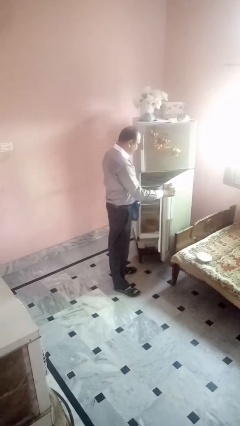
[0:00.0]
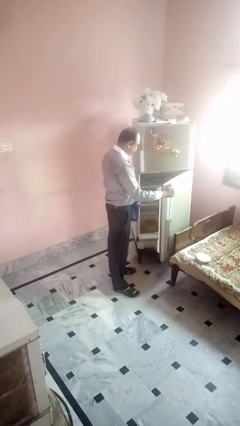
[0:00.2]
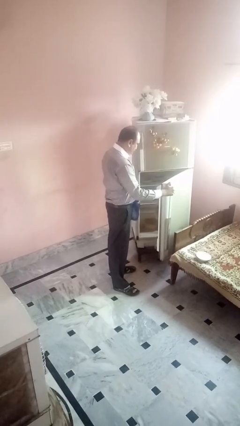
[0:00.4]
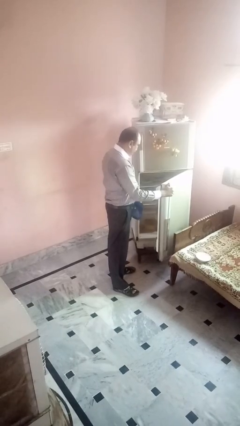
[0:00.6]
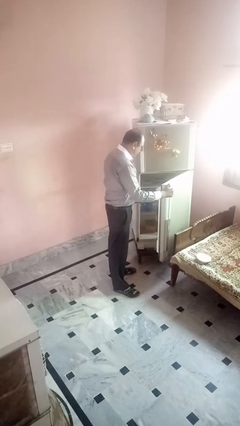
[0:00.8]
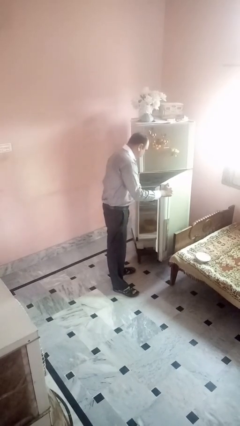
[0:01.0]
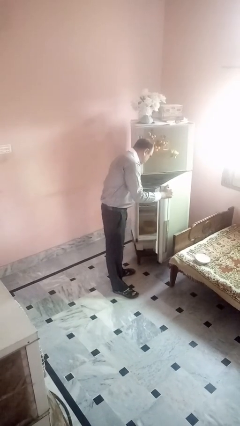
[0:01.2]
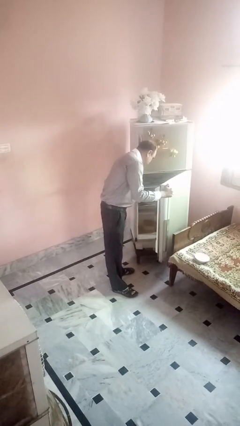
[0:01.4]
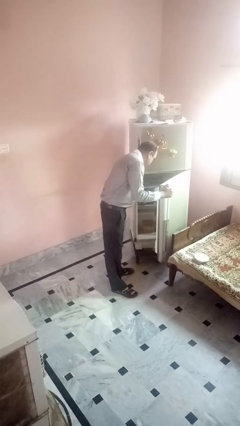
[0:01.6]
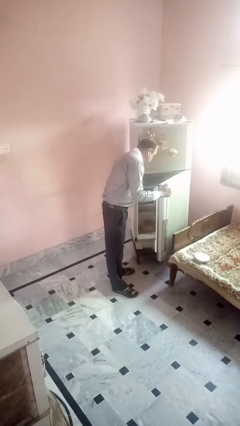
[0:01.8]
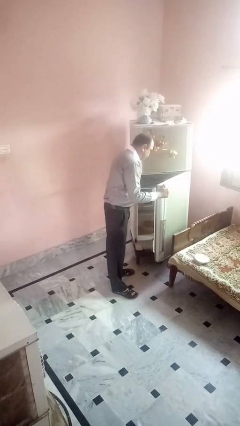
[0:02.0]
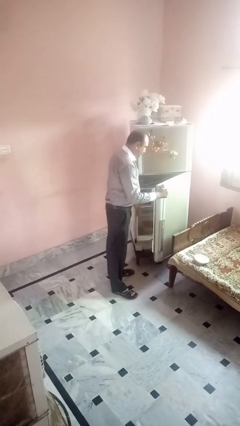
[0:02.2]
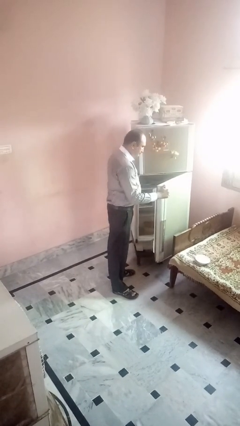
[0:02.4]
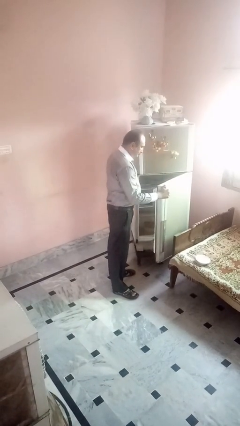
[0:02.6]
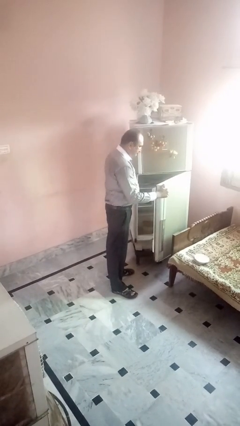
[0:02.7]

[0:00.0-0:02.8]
person puts object into refrigerator

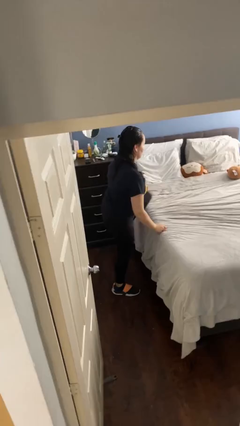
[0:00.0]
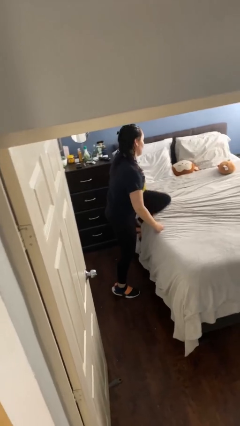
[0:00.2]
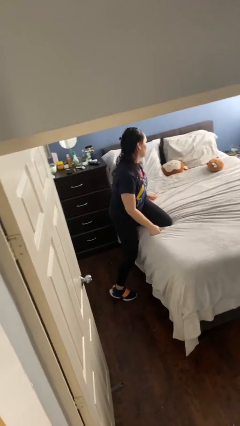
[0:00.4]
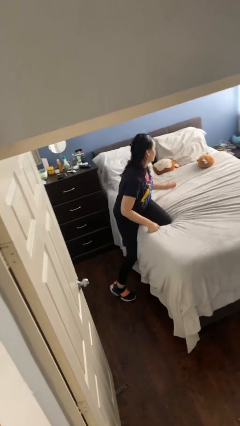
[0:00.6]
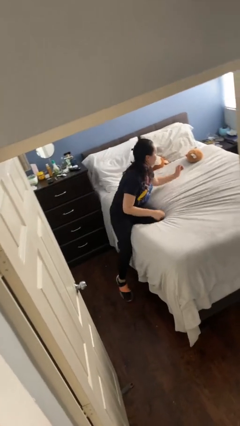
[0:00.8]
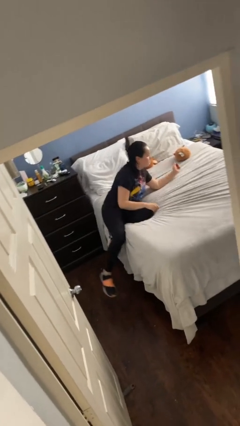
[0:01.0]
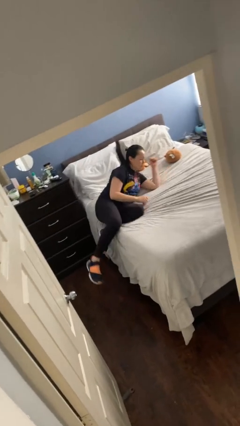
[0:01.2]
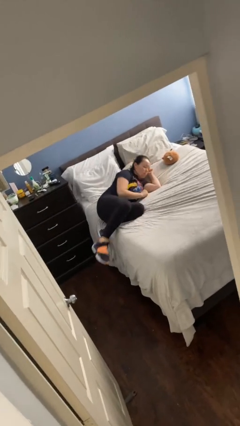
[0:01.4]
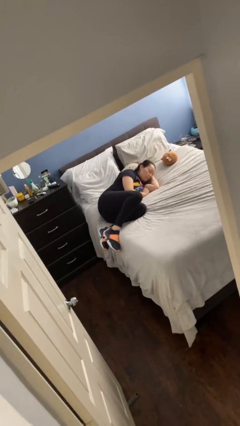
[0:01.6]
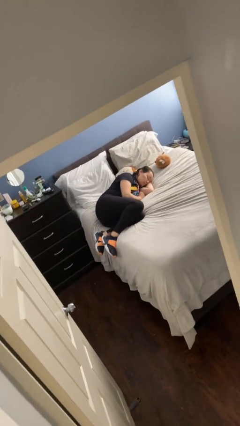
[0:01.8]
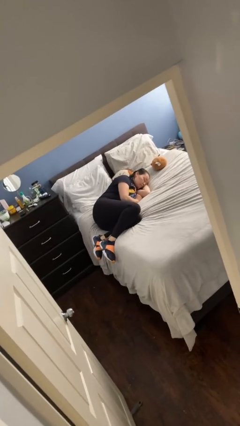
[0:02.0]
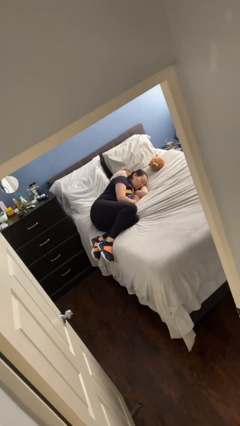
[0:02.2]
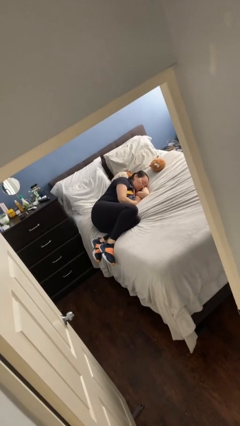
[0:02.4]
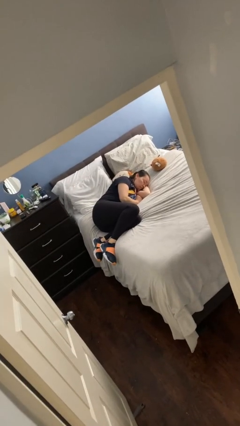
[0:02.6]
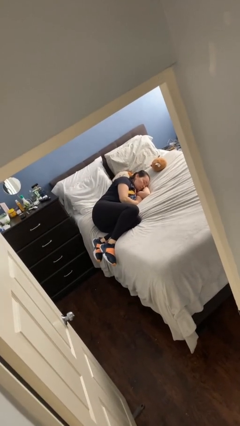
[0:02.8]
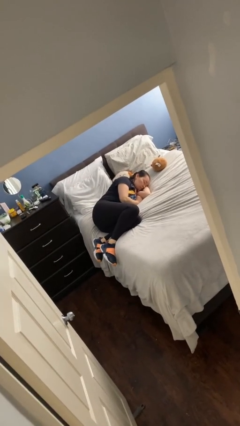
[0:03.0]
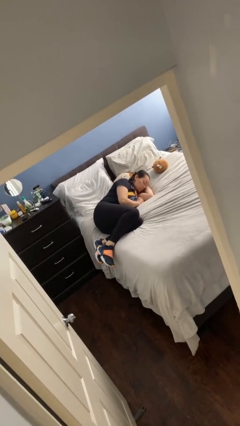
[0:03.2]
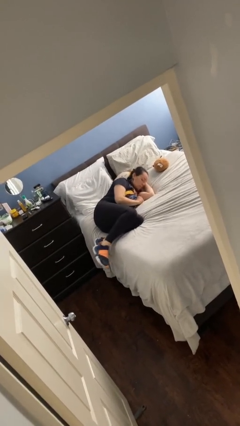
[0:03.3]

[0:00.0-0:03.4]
person lies down on bed

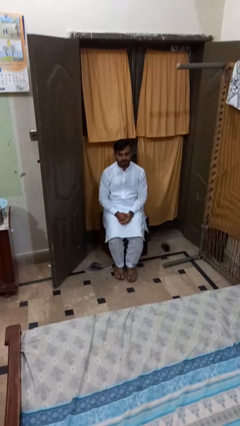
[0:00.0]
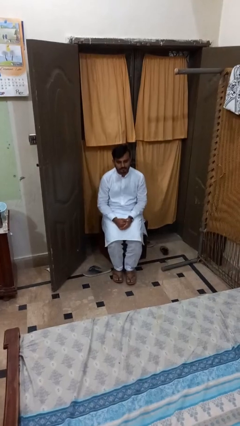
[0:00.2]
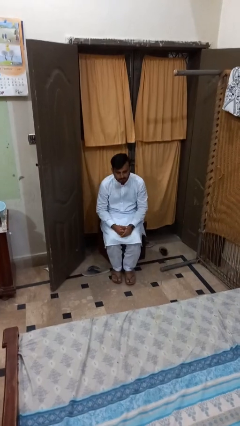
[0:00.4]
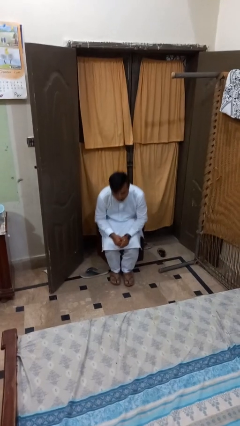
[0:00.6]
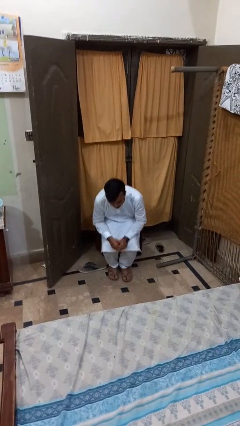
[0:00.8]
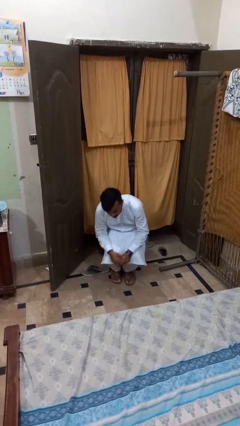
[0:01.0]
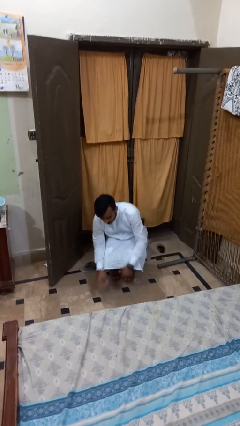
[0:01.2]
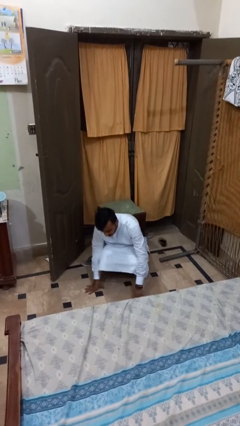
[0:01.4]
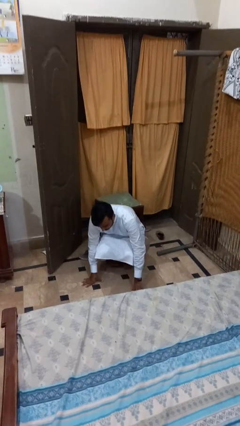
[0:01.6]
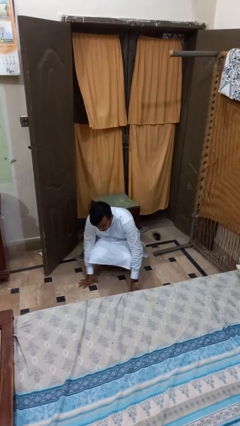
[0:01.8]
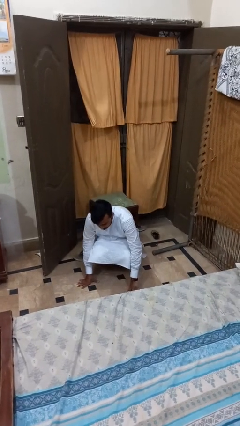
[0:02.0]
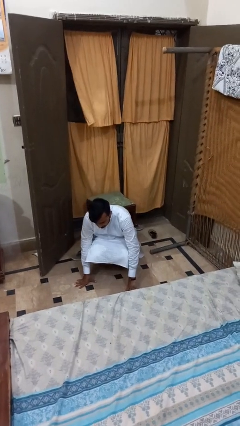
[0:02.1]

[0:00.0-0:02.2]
person falls from chair

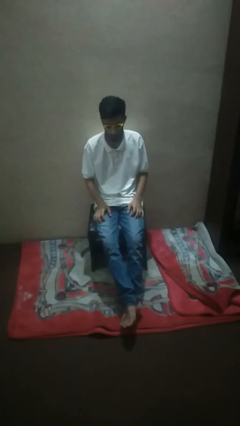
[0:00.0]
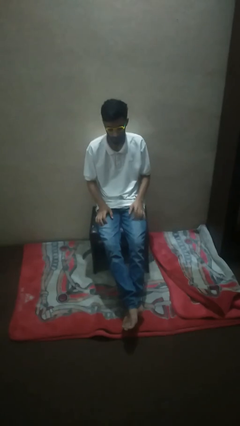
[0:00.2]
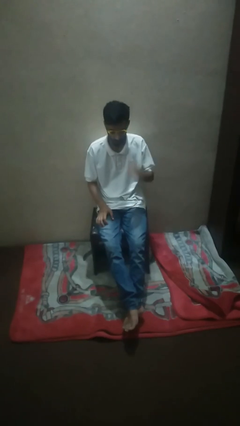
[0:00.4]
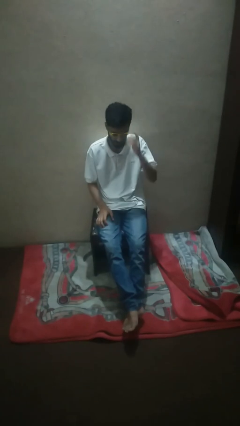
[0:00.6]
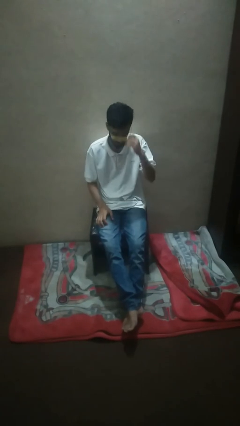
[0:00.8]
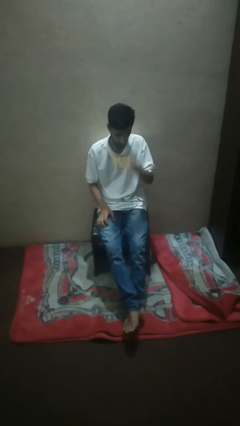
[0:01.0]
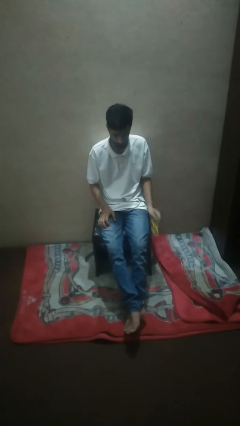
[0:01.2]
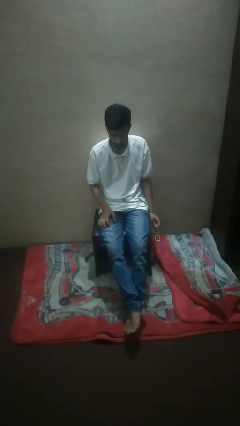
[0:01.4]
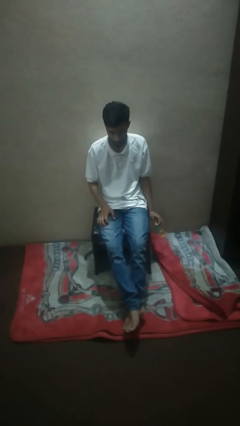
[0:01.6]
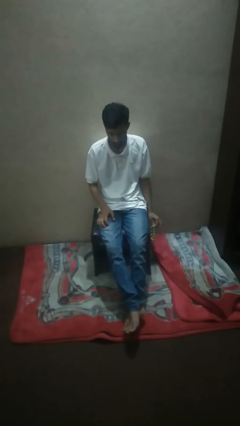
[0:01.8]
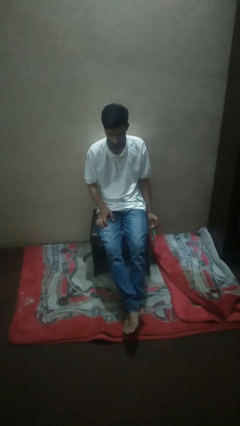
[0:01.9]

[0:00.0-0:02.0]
person takes off sunglasses

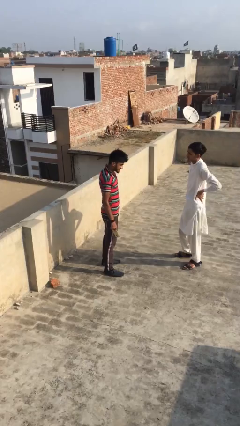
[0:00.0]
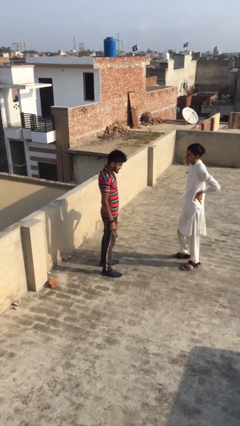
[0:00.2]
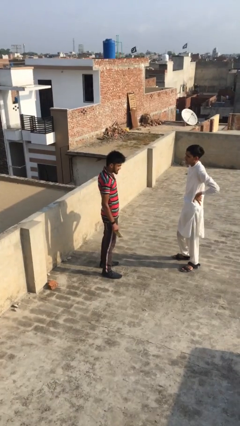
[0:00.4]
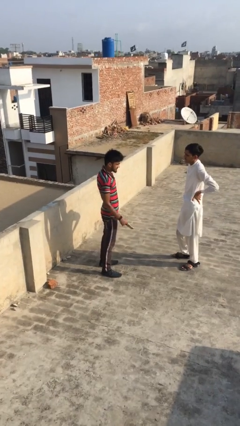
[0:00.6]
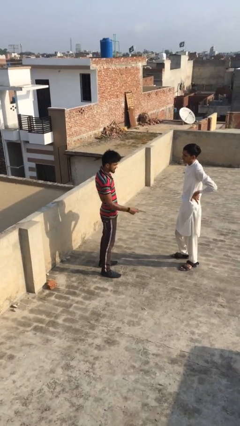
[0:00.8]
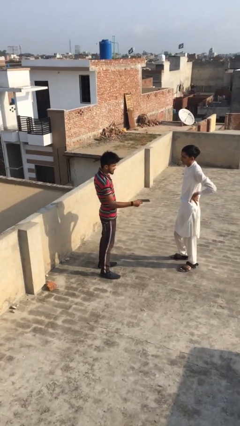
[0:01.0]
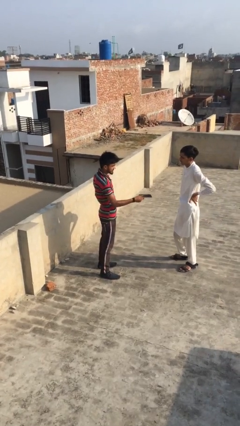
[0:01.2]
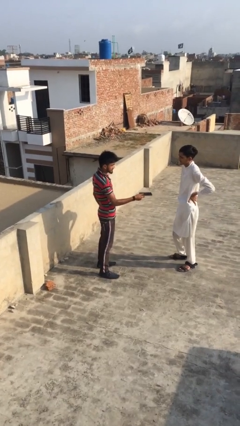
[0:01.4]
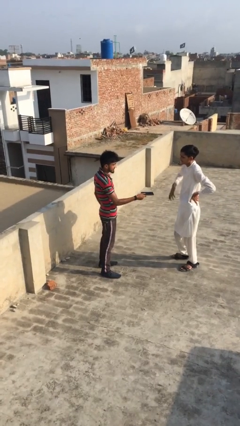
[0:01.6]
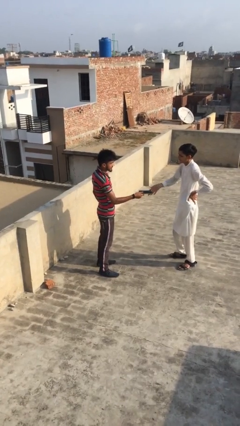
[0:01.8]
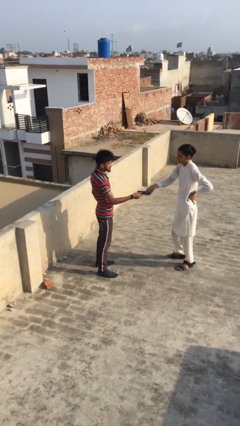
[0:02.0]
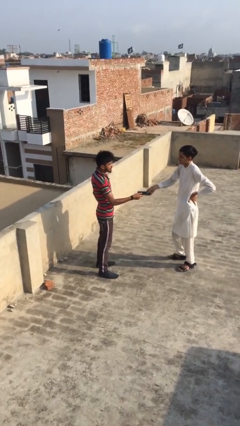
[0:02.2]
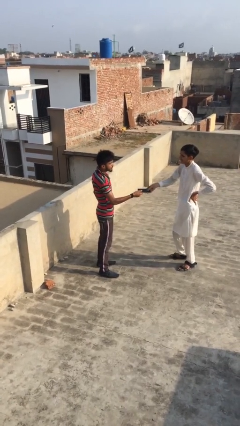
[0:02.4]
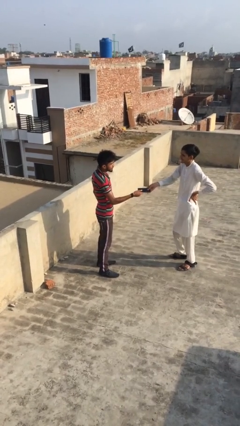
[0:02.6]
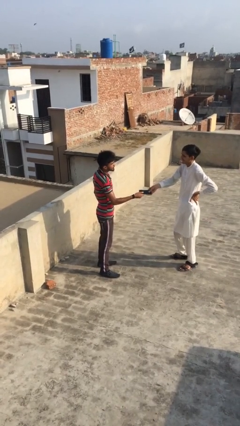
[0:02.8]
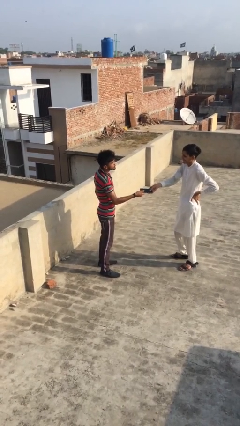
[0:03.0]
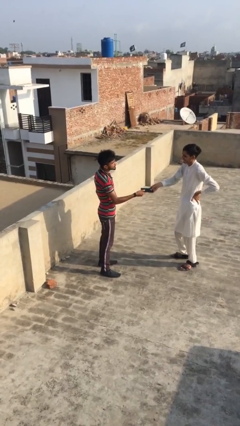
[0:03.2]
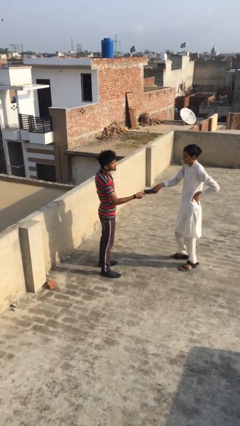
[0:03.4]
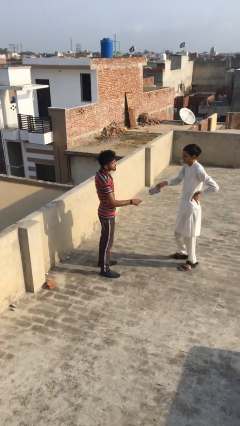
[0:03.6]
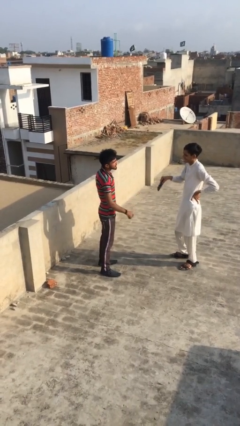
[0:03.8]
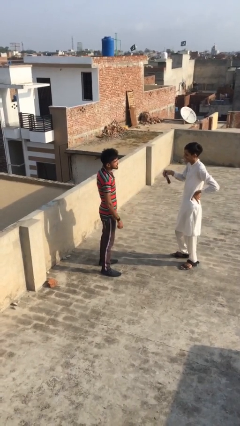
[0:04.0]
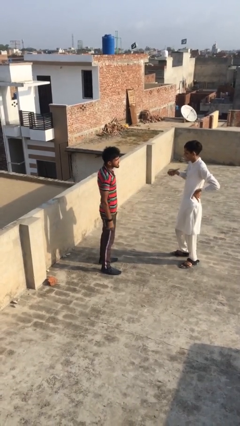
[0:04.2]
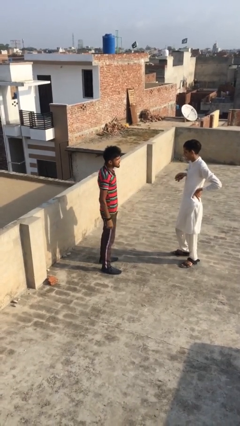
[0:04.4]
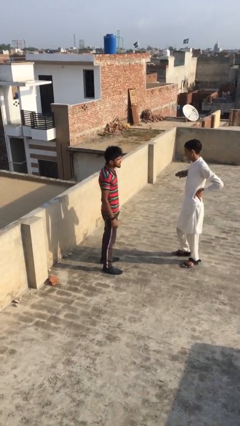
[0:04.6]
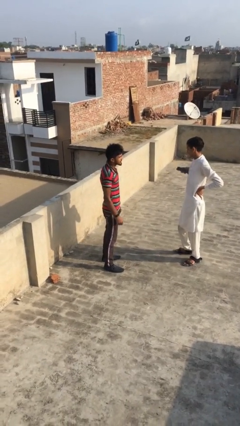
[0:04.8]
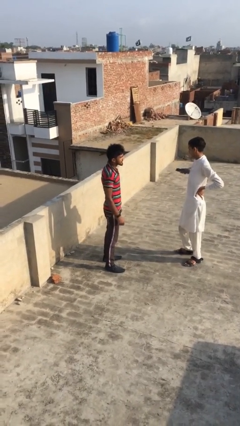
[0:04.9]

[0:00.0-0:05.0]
person transfers object to person

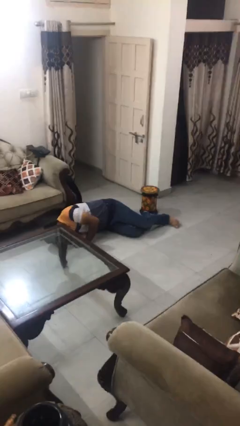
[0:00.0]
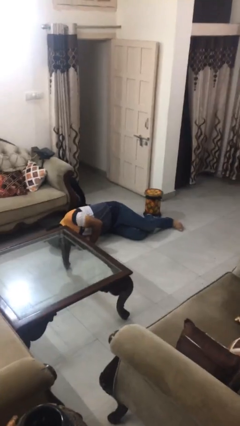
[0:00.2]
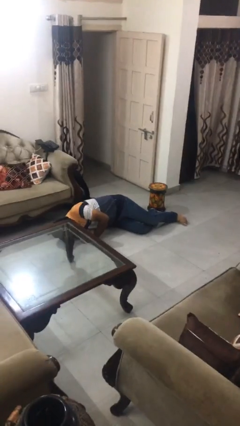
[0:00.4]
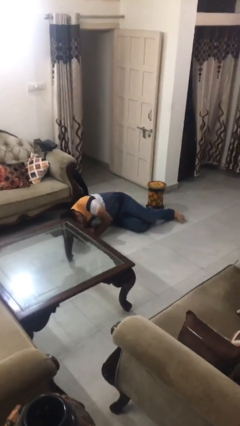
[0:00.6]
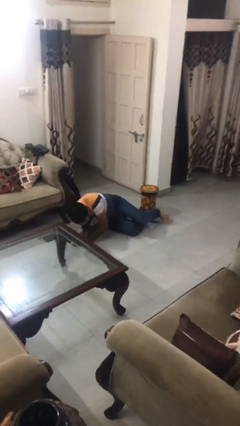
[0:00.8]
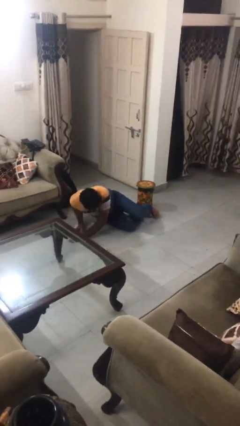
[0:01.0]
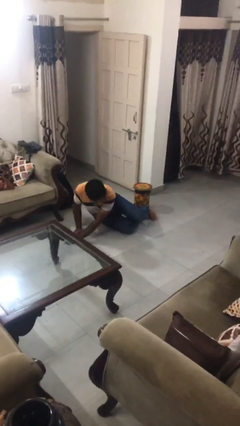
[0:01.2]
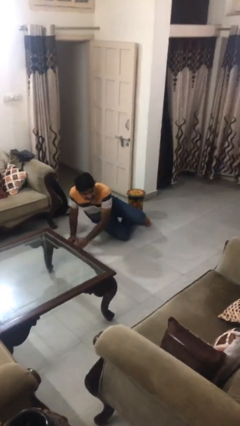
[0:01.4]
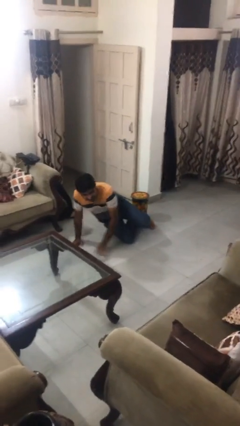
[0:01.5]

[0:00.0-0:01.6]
person lies down on floor

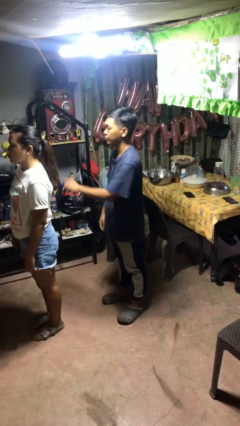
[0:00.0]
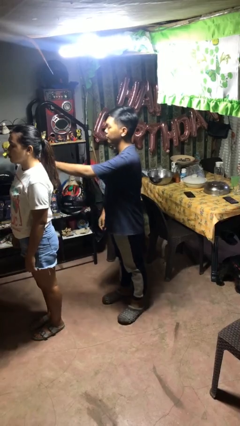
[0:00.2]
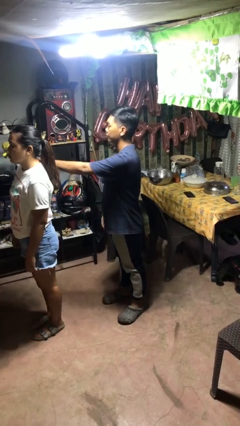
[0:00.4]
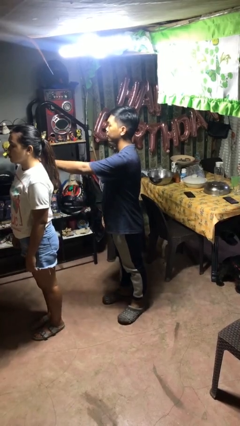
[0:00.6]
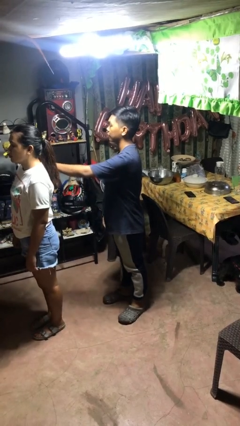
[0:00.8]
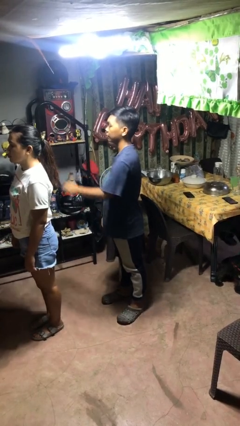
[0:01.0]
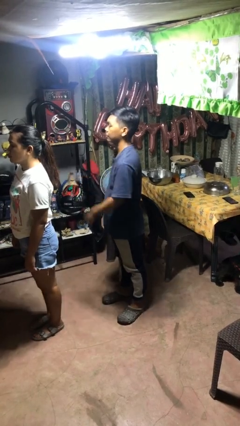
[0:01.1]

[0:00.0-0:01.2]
person pounds shoulders of person
